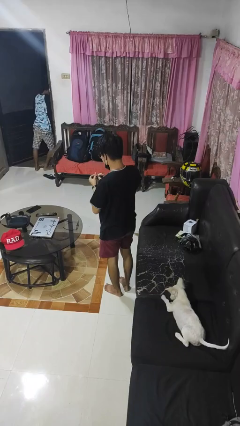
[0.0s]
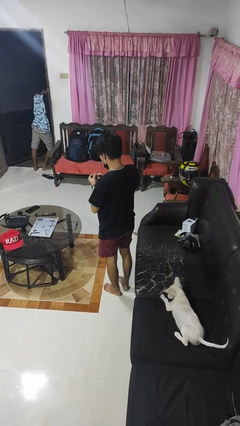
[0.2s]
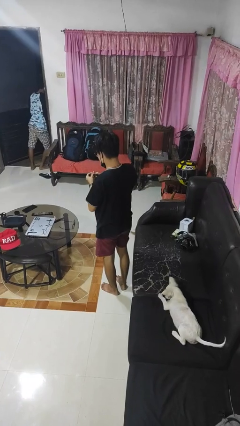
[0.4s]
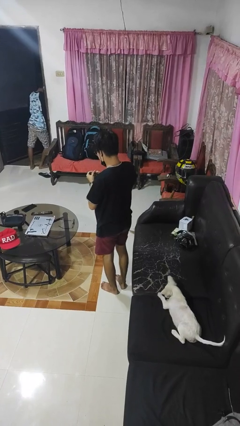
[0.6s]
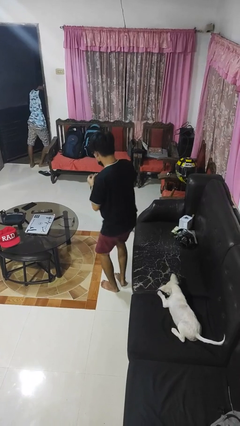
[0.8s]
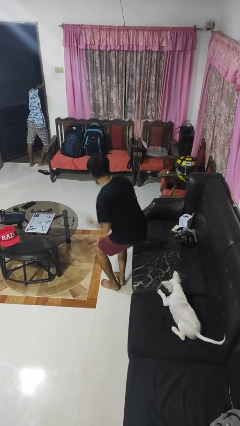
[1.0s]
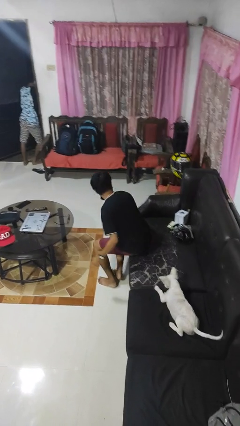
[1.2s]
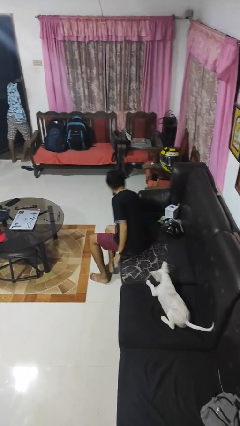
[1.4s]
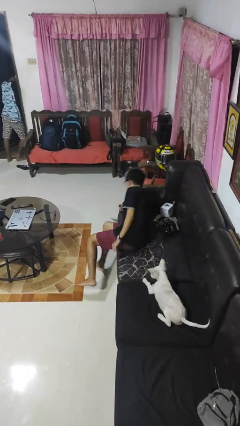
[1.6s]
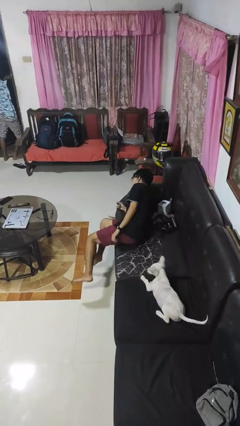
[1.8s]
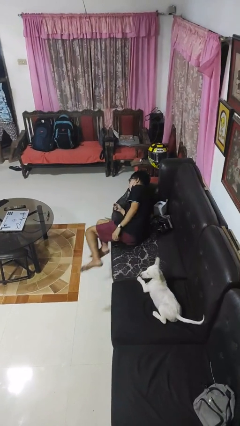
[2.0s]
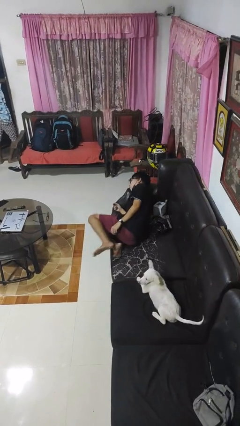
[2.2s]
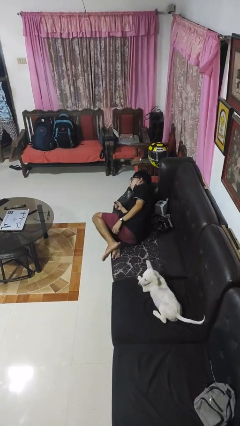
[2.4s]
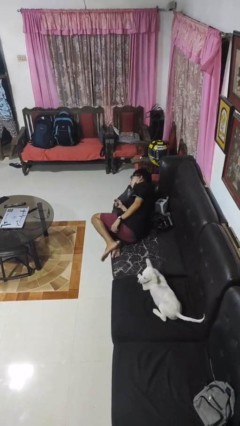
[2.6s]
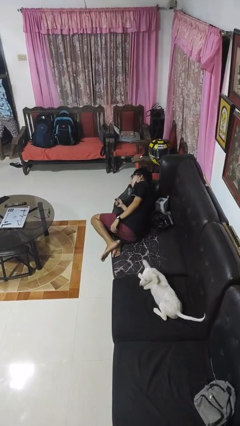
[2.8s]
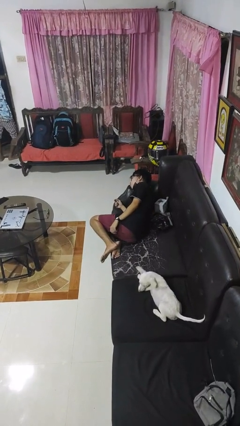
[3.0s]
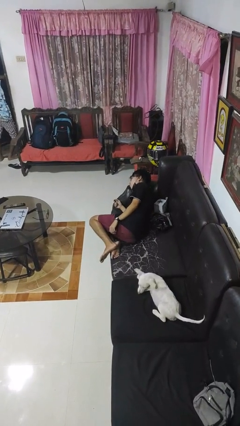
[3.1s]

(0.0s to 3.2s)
person lies down on couch

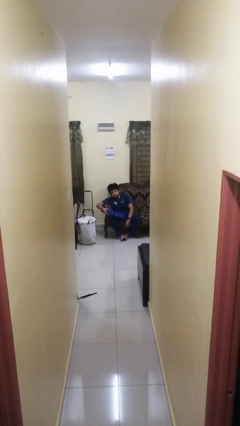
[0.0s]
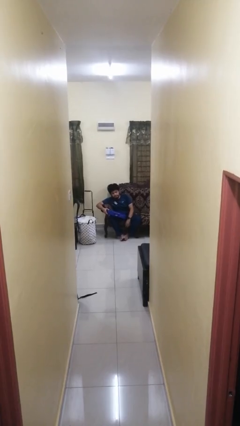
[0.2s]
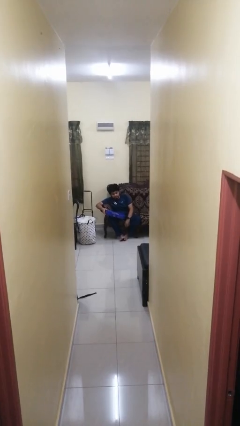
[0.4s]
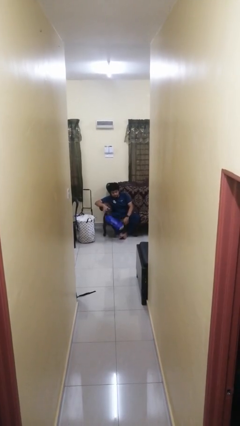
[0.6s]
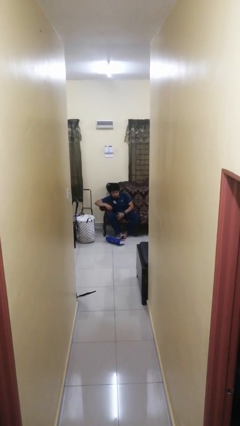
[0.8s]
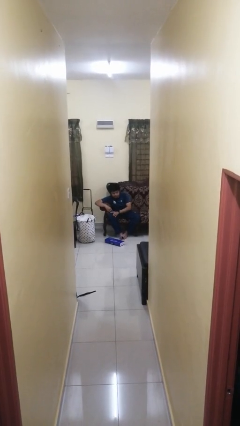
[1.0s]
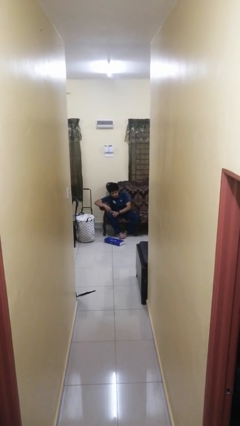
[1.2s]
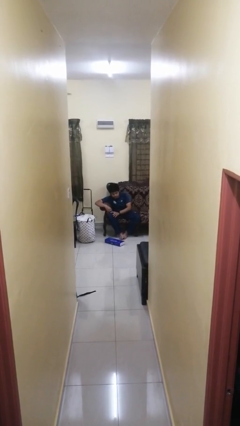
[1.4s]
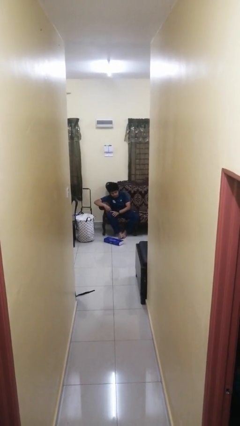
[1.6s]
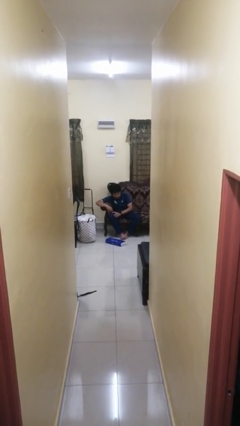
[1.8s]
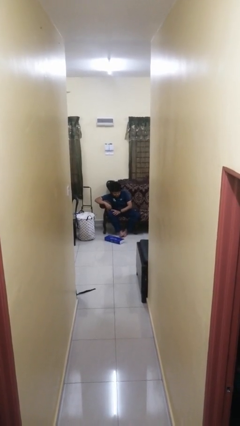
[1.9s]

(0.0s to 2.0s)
person drops object

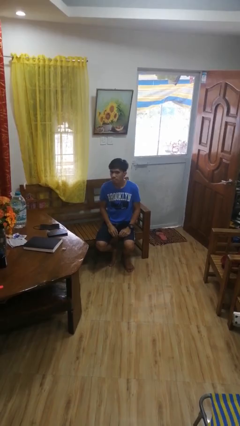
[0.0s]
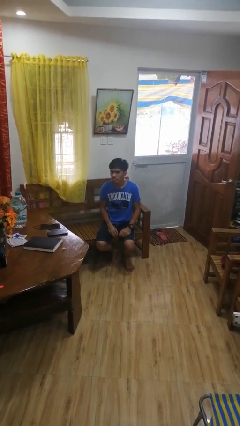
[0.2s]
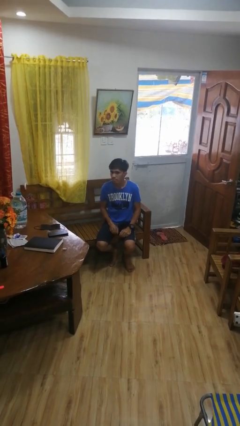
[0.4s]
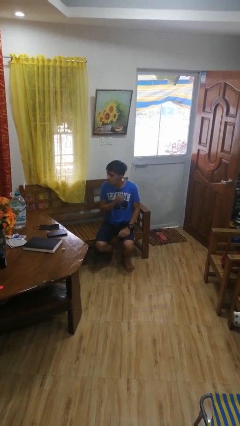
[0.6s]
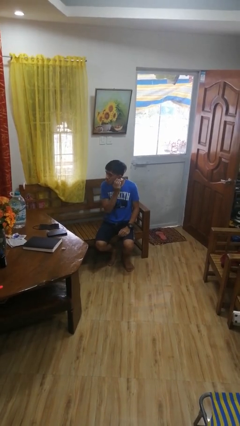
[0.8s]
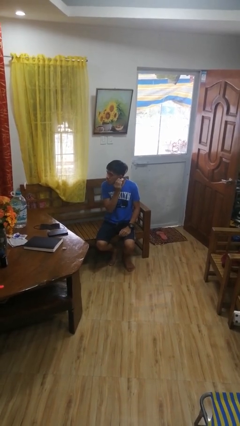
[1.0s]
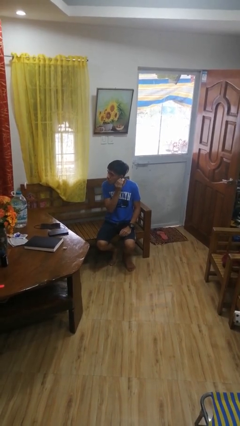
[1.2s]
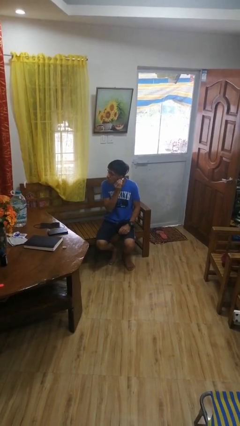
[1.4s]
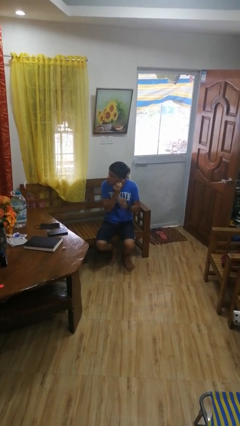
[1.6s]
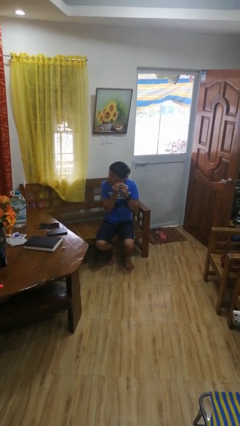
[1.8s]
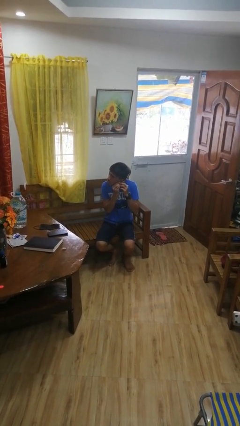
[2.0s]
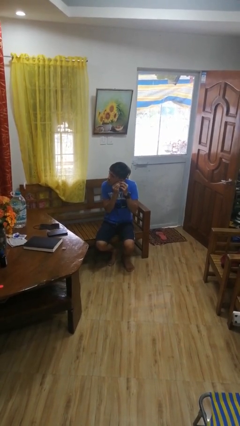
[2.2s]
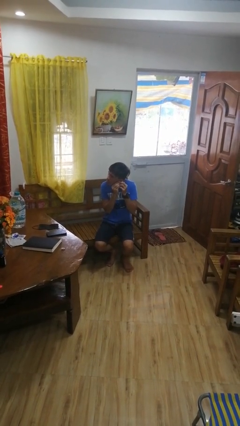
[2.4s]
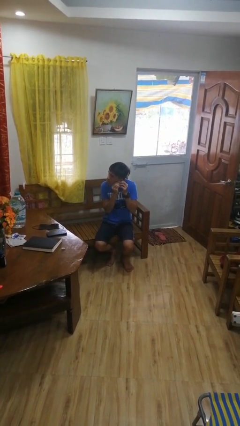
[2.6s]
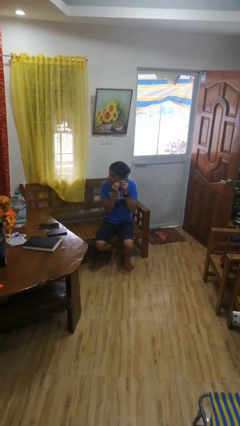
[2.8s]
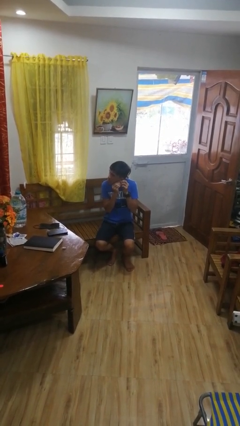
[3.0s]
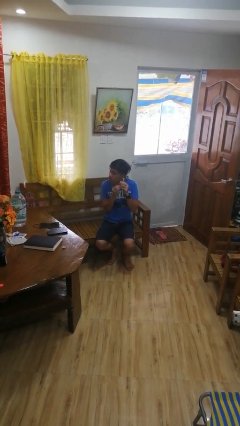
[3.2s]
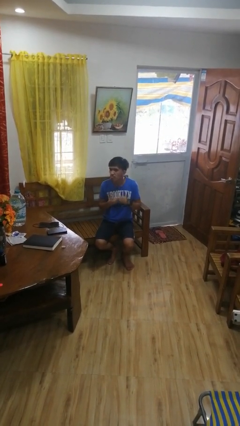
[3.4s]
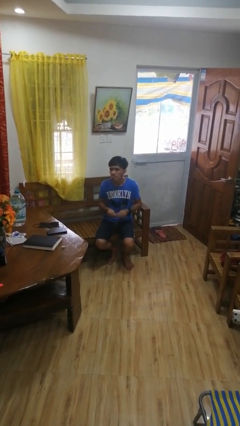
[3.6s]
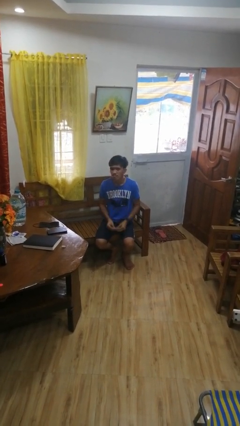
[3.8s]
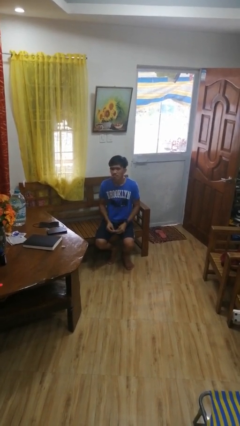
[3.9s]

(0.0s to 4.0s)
person takes off earrings

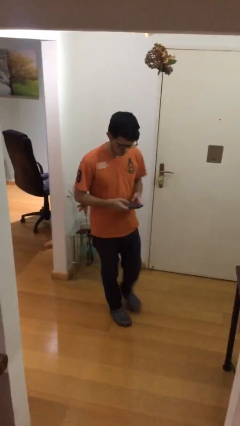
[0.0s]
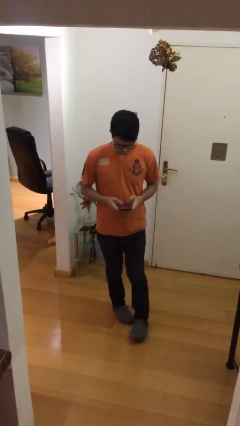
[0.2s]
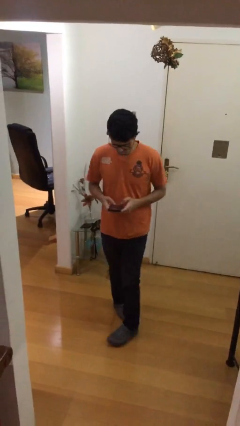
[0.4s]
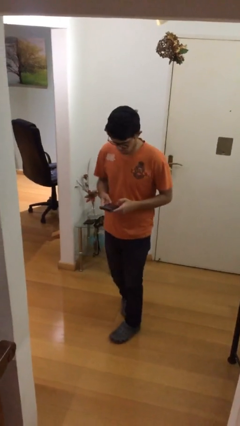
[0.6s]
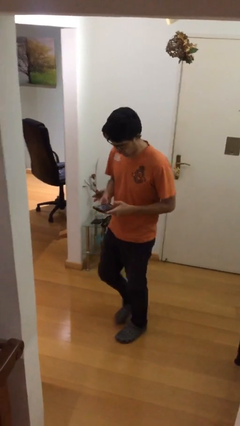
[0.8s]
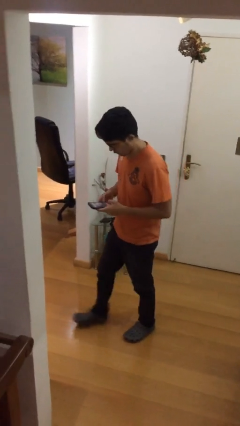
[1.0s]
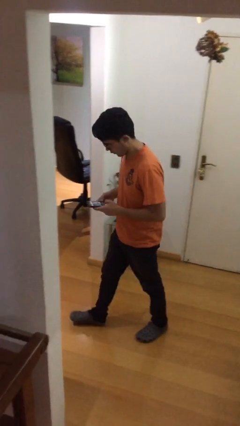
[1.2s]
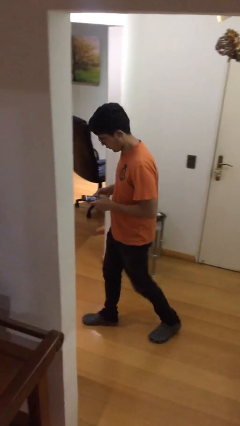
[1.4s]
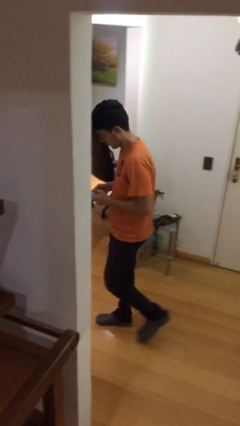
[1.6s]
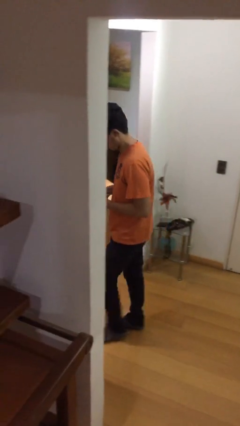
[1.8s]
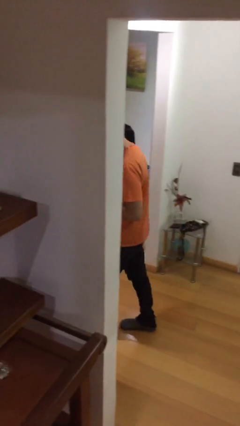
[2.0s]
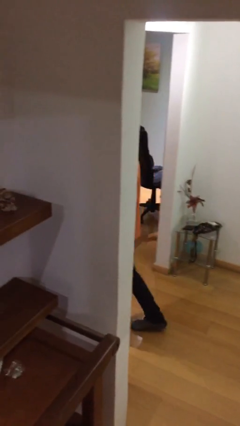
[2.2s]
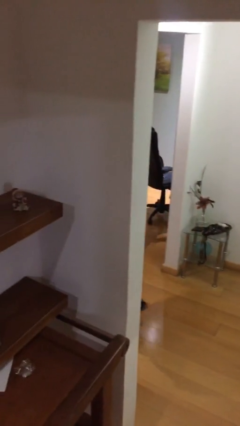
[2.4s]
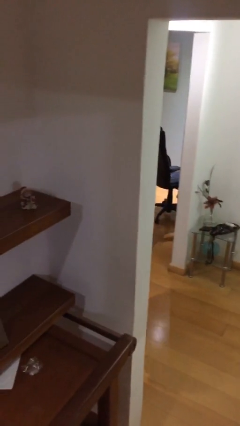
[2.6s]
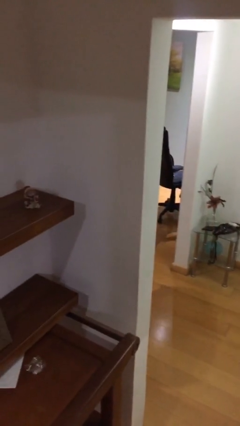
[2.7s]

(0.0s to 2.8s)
person exits scene through structure

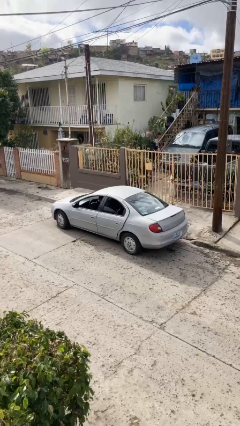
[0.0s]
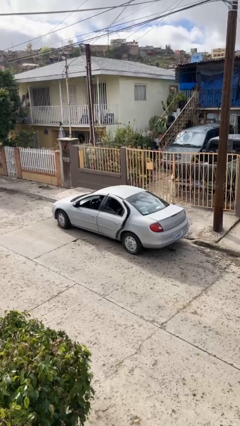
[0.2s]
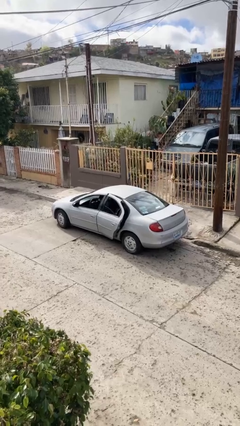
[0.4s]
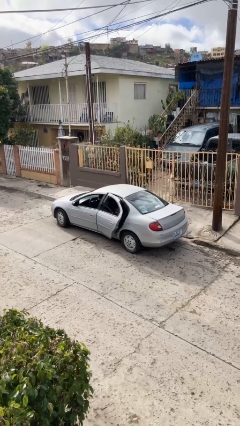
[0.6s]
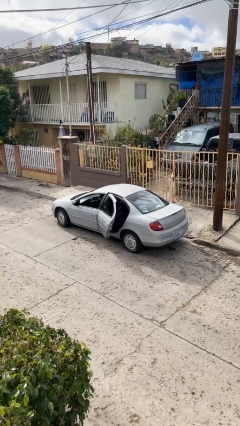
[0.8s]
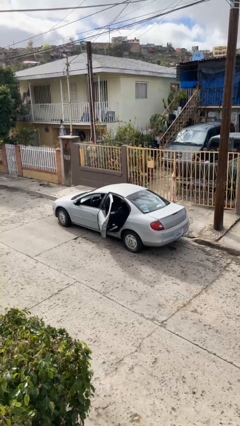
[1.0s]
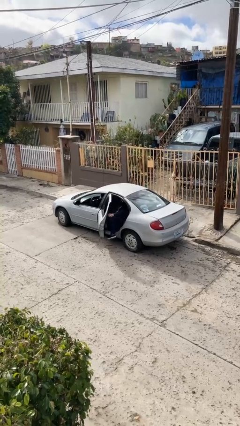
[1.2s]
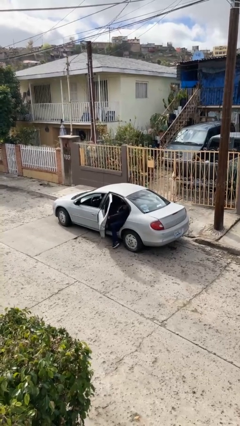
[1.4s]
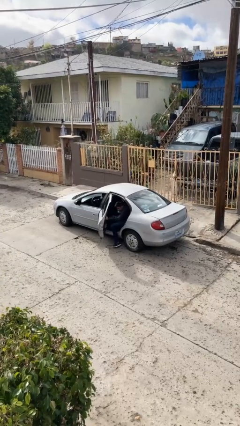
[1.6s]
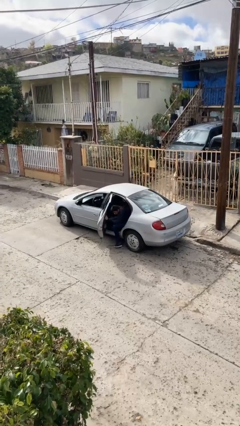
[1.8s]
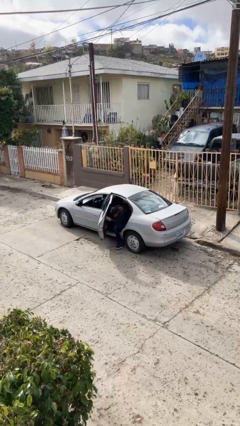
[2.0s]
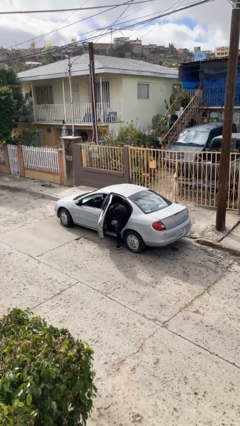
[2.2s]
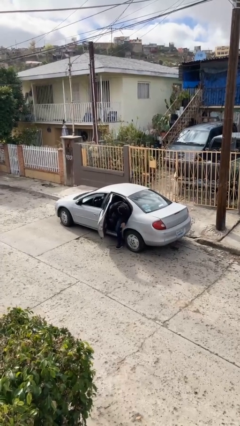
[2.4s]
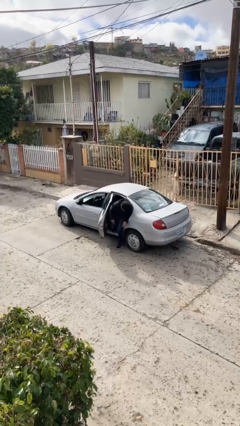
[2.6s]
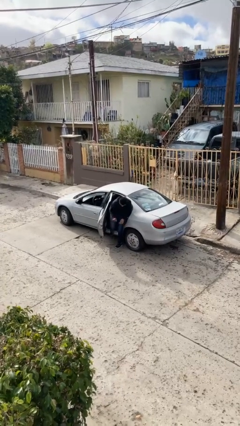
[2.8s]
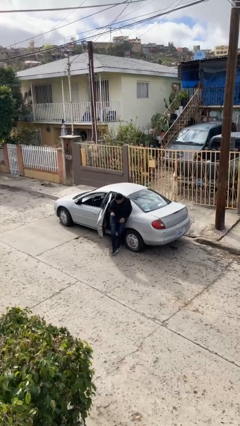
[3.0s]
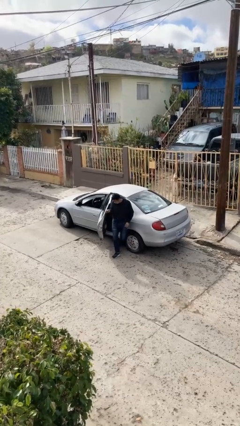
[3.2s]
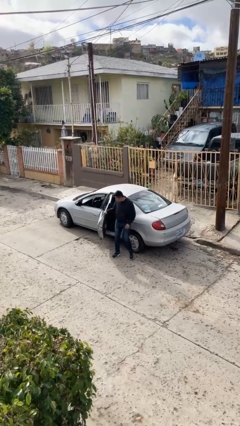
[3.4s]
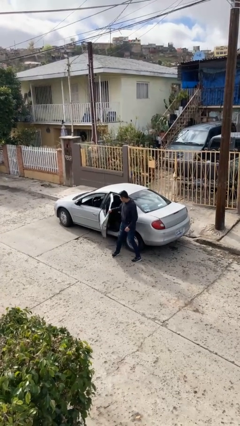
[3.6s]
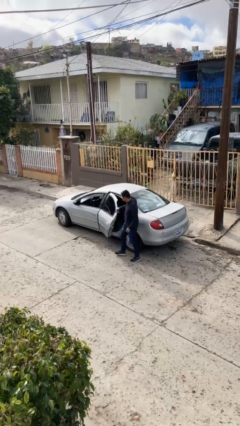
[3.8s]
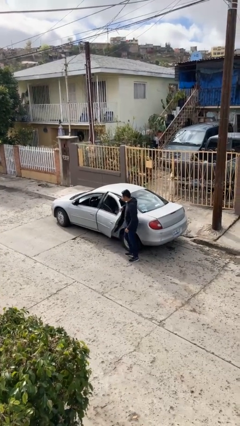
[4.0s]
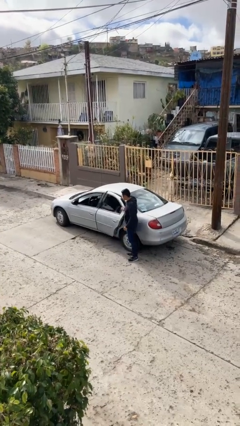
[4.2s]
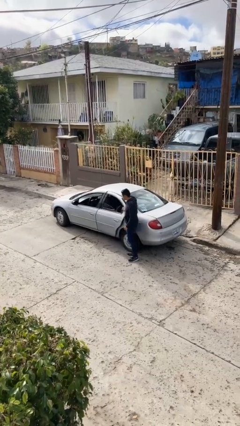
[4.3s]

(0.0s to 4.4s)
car drops off person

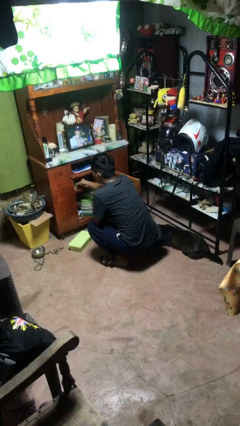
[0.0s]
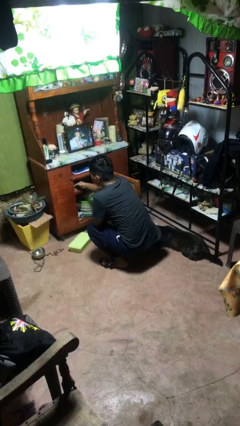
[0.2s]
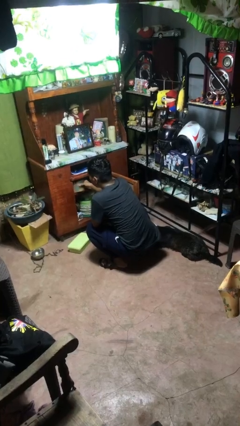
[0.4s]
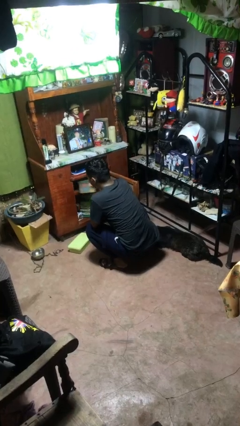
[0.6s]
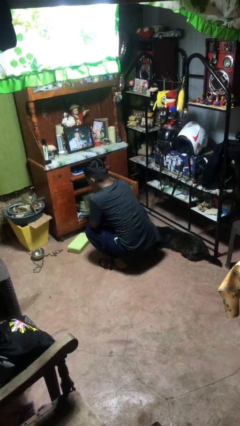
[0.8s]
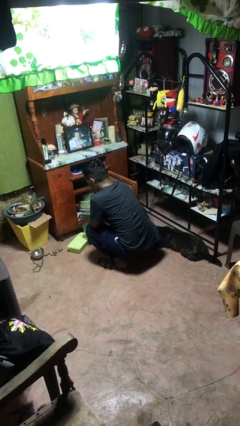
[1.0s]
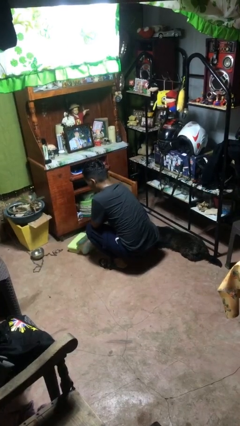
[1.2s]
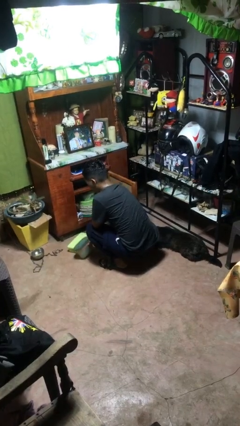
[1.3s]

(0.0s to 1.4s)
person takes object from cabinet
